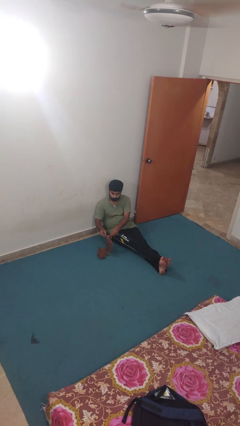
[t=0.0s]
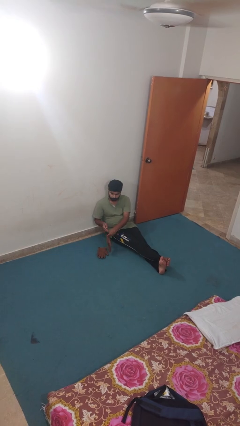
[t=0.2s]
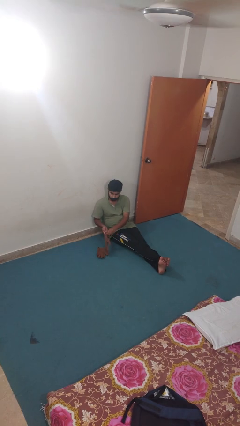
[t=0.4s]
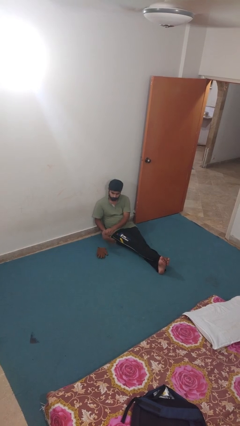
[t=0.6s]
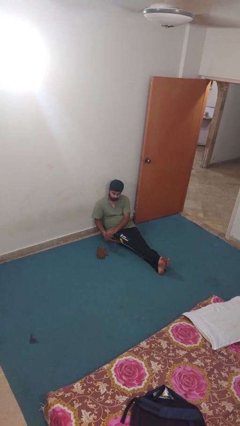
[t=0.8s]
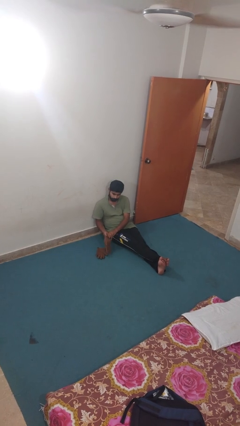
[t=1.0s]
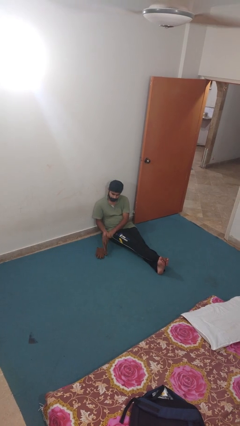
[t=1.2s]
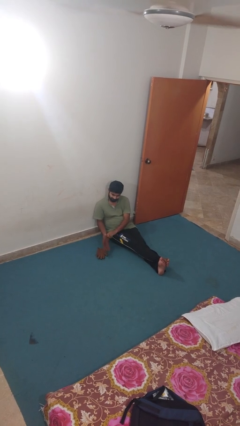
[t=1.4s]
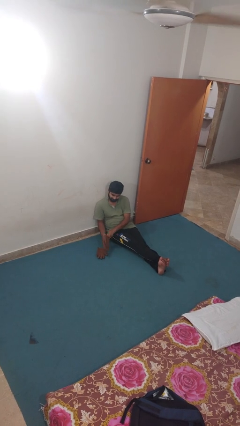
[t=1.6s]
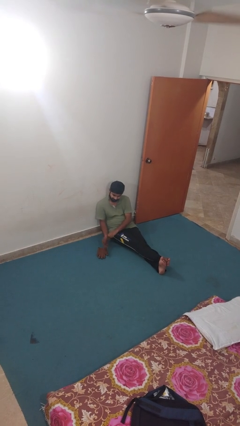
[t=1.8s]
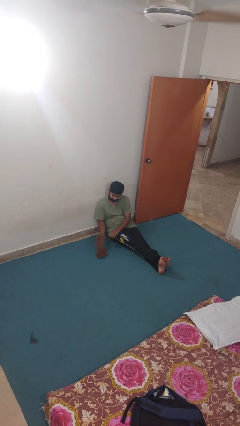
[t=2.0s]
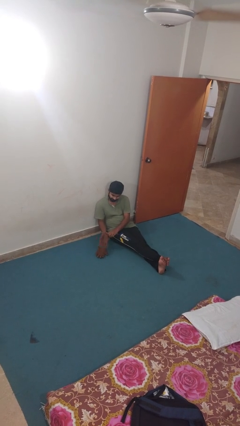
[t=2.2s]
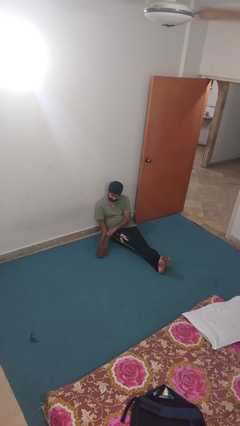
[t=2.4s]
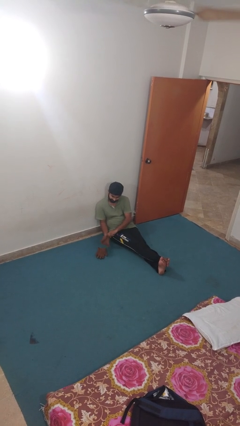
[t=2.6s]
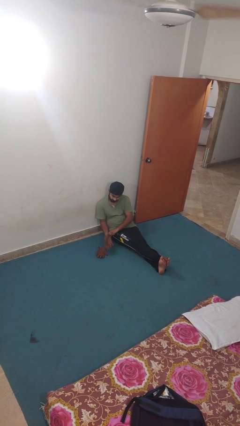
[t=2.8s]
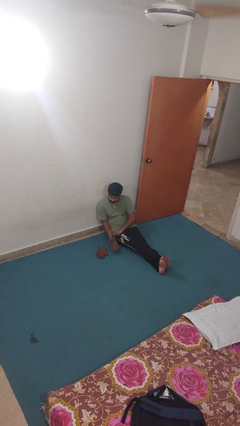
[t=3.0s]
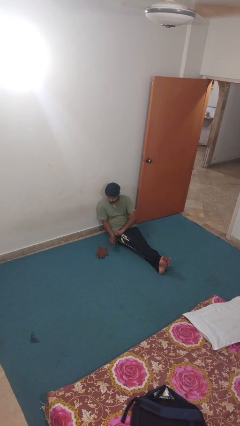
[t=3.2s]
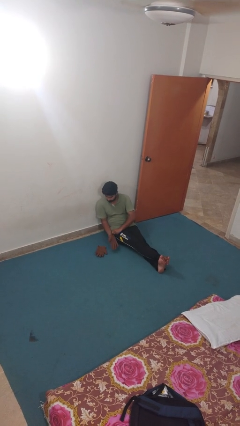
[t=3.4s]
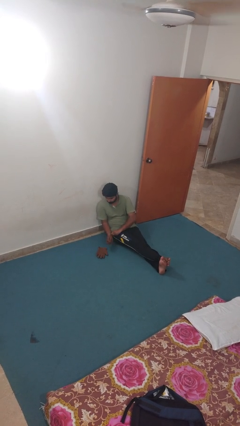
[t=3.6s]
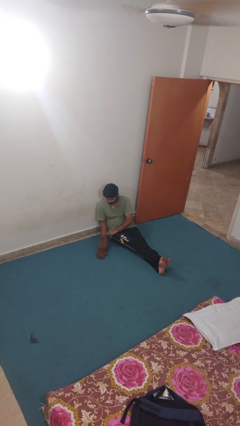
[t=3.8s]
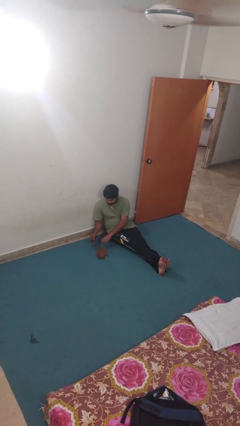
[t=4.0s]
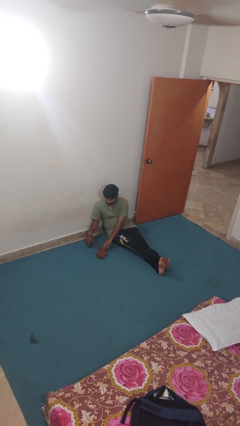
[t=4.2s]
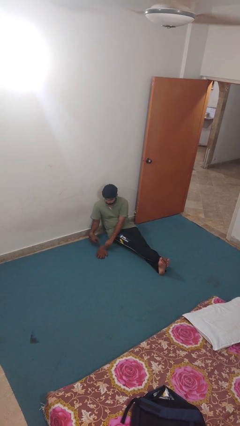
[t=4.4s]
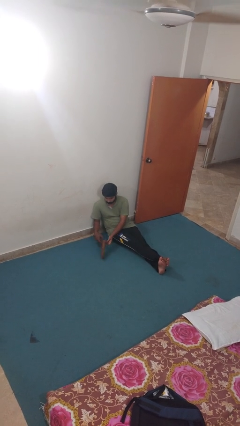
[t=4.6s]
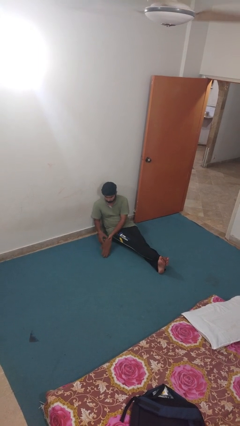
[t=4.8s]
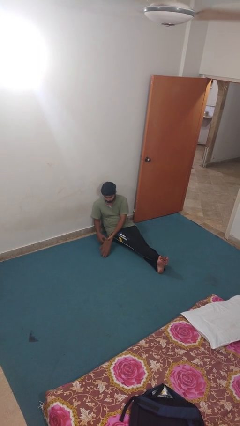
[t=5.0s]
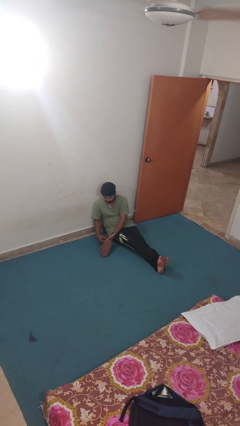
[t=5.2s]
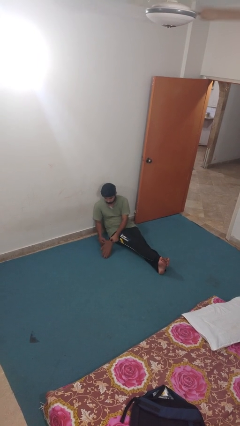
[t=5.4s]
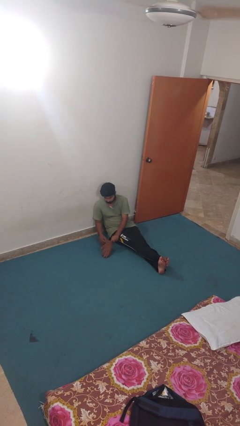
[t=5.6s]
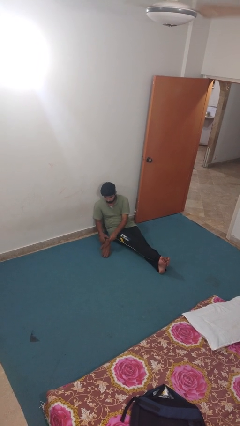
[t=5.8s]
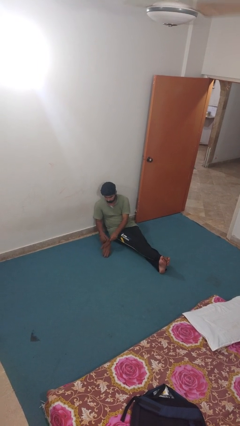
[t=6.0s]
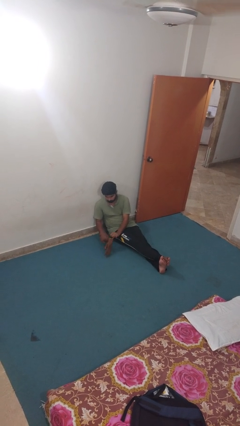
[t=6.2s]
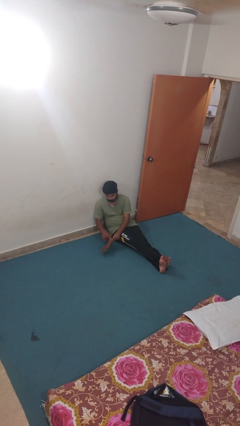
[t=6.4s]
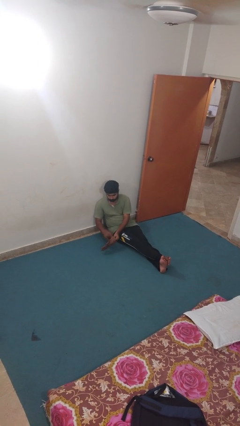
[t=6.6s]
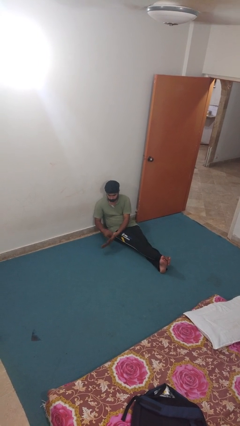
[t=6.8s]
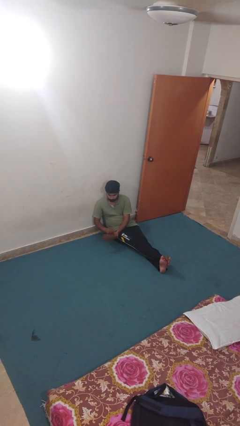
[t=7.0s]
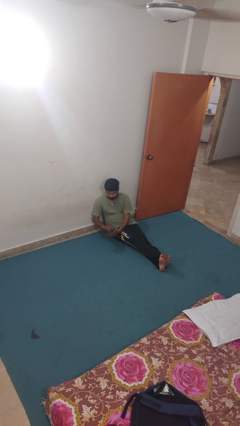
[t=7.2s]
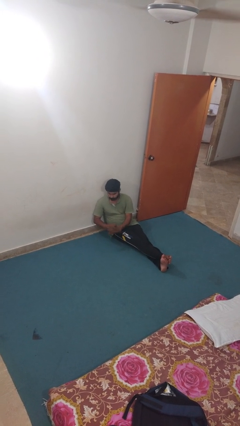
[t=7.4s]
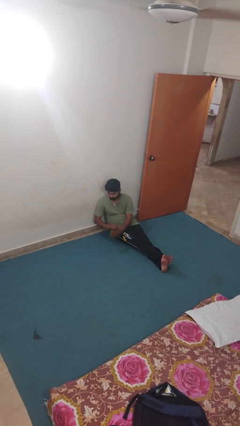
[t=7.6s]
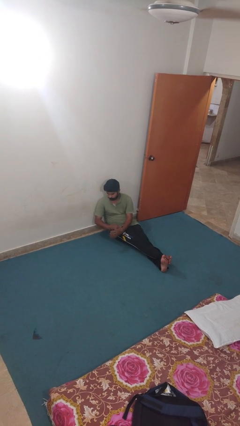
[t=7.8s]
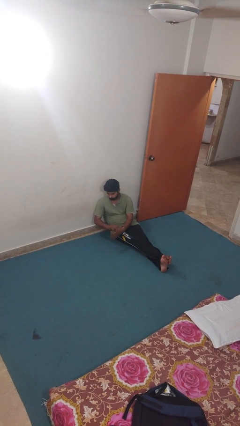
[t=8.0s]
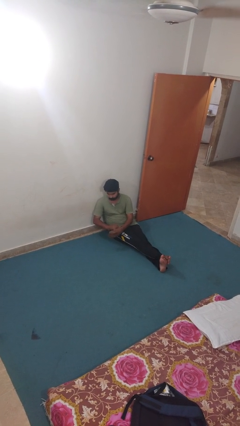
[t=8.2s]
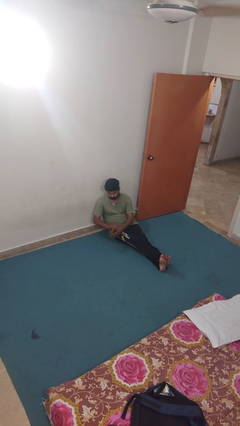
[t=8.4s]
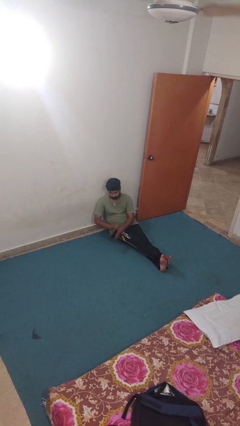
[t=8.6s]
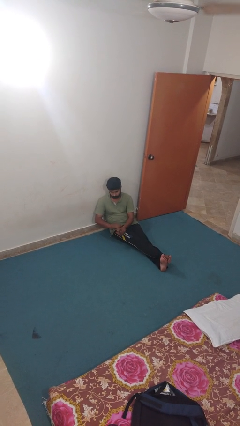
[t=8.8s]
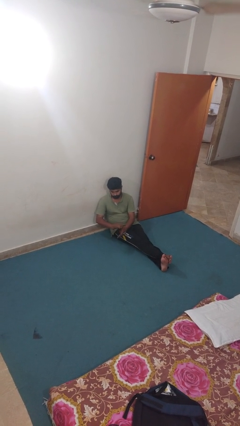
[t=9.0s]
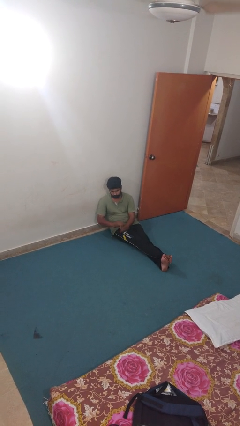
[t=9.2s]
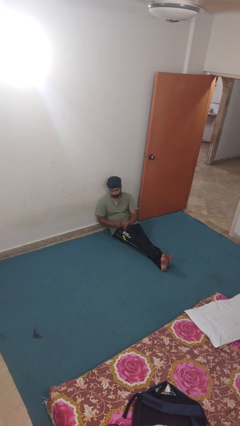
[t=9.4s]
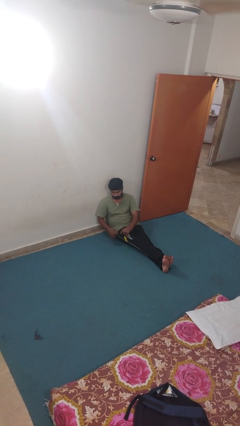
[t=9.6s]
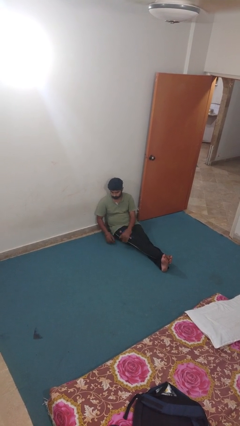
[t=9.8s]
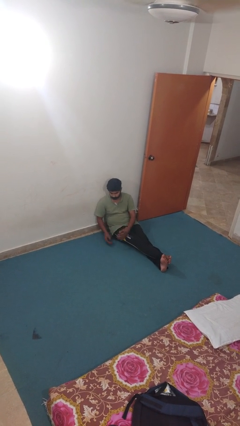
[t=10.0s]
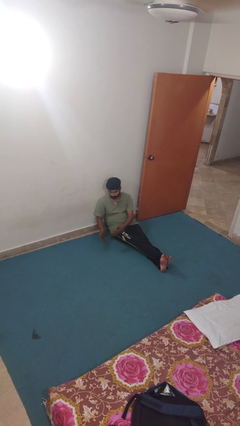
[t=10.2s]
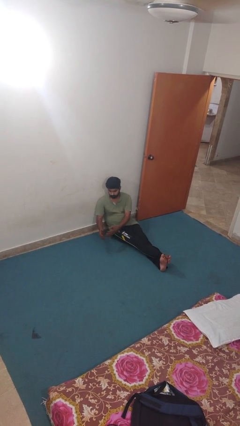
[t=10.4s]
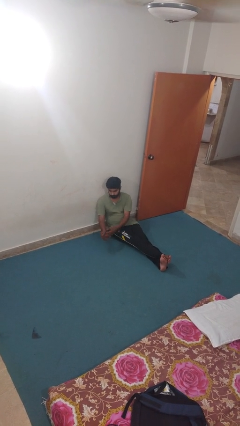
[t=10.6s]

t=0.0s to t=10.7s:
person puts on gloves

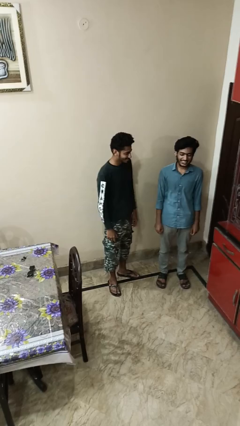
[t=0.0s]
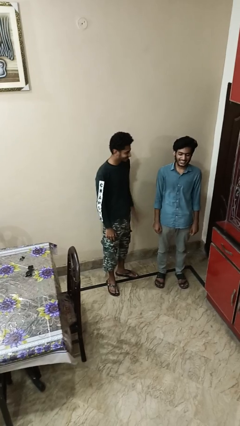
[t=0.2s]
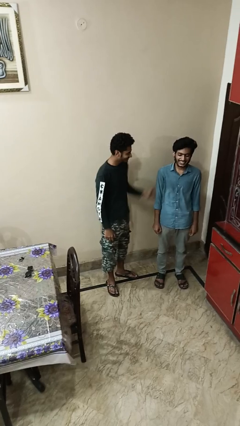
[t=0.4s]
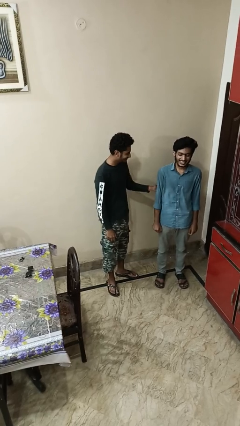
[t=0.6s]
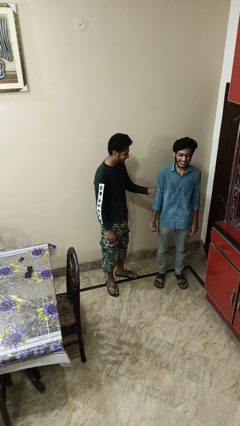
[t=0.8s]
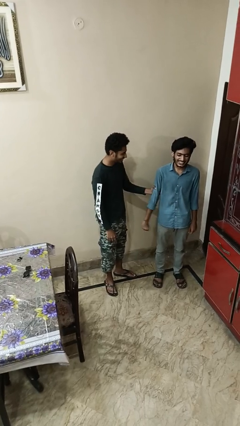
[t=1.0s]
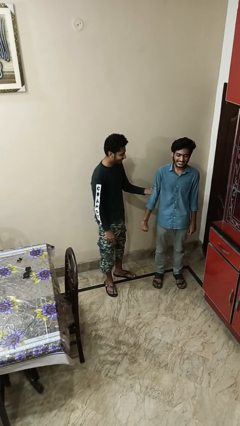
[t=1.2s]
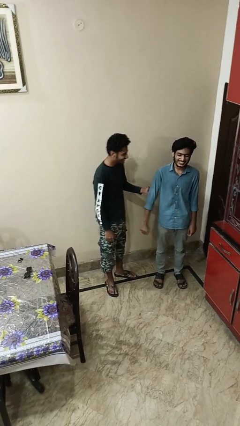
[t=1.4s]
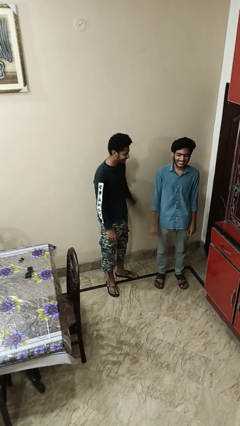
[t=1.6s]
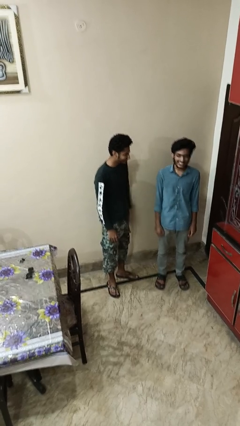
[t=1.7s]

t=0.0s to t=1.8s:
person grabs person by bicep

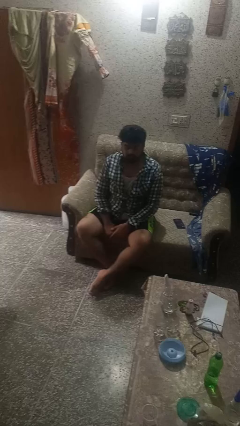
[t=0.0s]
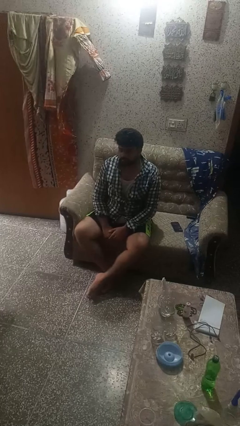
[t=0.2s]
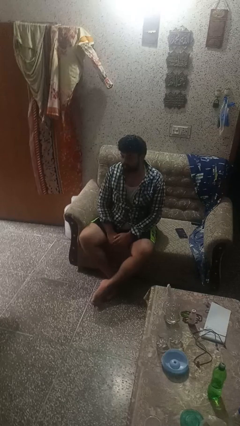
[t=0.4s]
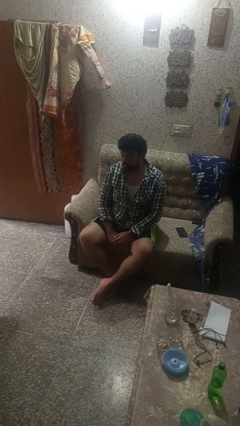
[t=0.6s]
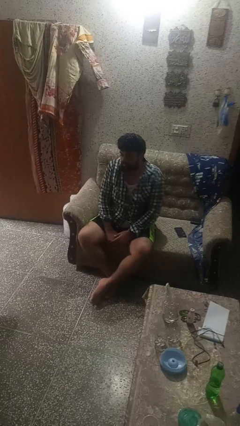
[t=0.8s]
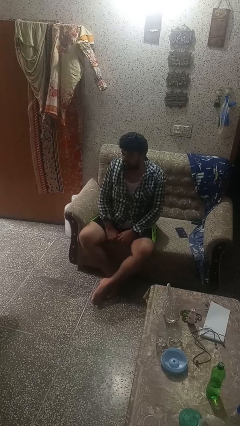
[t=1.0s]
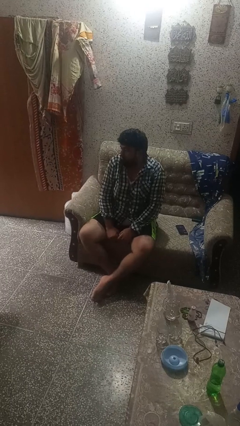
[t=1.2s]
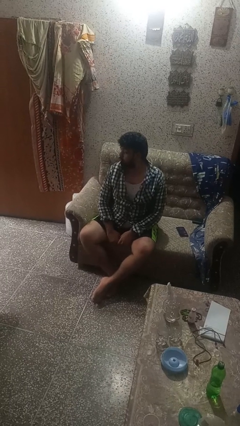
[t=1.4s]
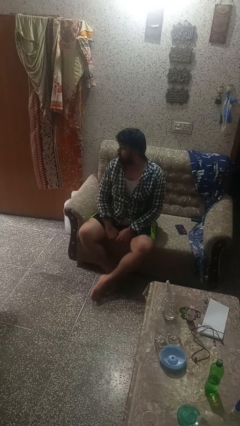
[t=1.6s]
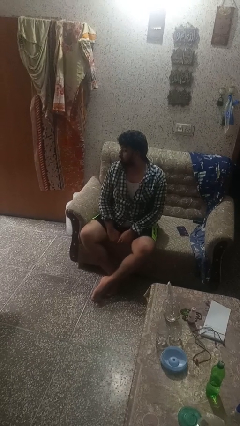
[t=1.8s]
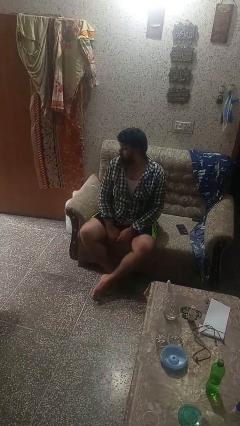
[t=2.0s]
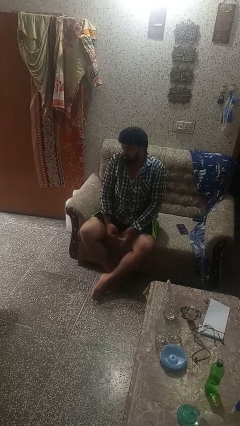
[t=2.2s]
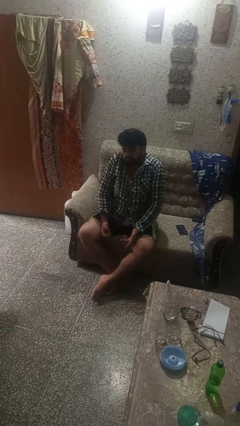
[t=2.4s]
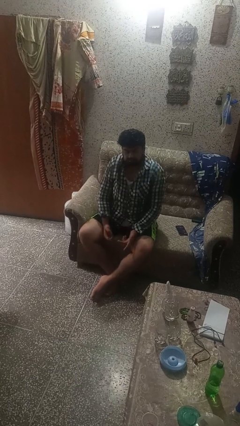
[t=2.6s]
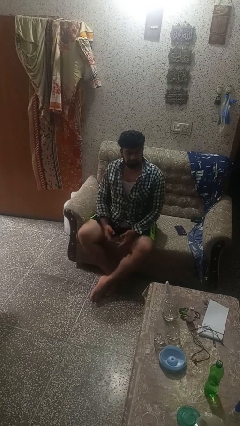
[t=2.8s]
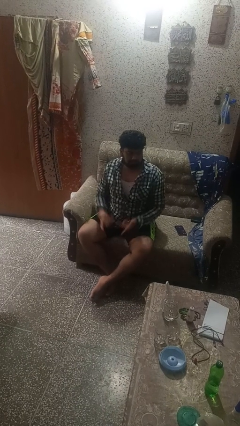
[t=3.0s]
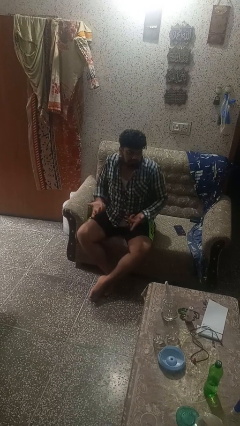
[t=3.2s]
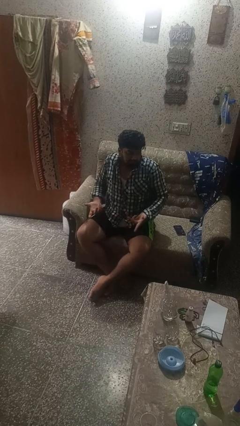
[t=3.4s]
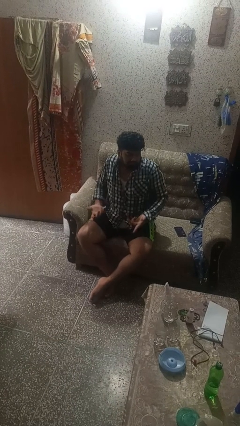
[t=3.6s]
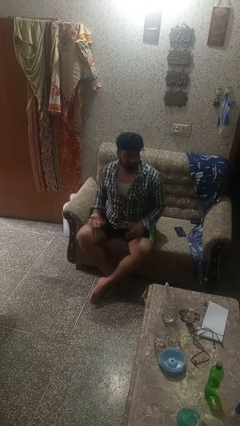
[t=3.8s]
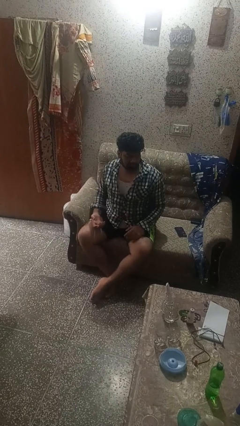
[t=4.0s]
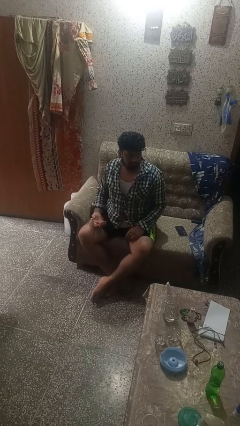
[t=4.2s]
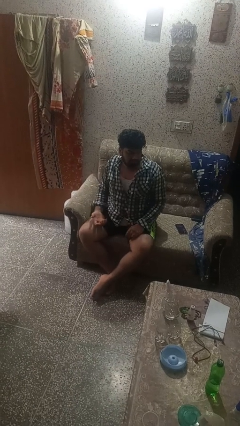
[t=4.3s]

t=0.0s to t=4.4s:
person shrugs

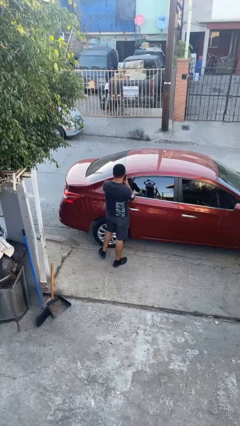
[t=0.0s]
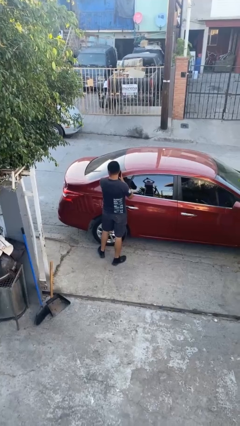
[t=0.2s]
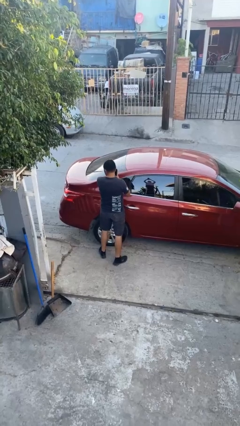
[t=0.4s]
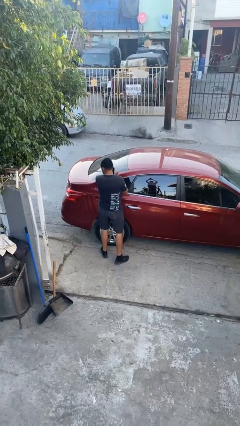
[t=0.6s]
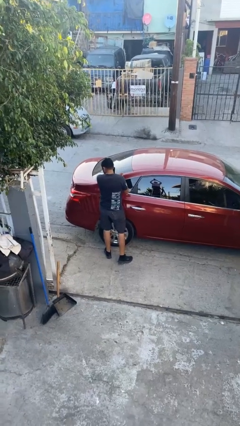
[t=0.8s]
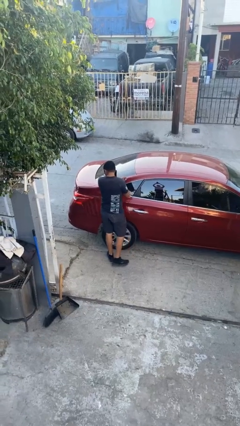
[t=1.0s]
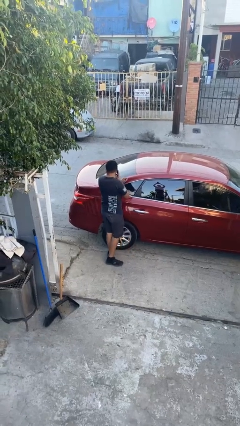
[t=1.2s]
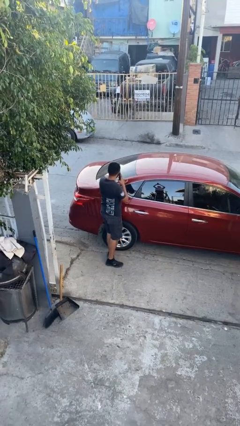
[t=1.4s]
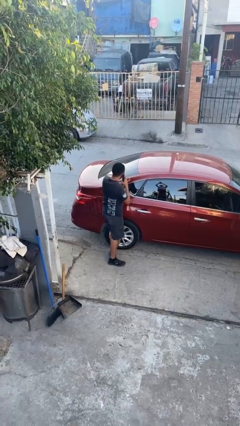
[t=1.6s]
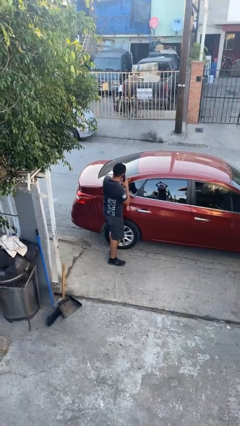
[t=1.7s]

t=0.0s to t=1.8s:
person leans against car
